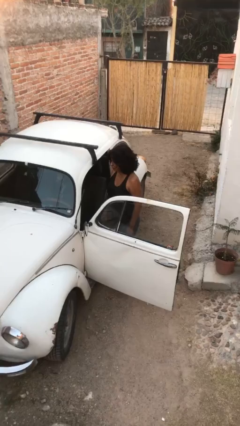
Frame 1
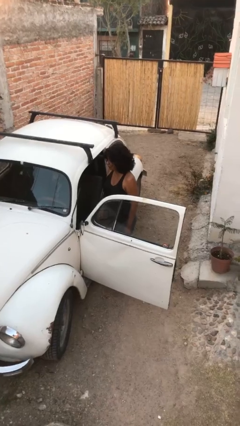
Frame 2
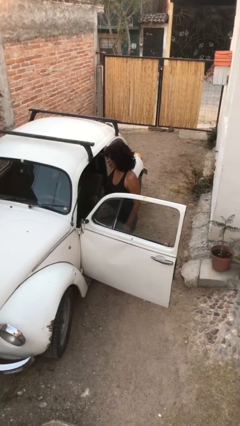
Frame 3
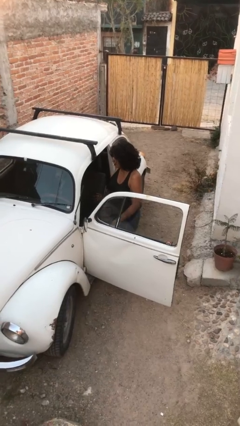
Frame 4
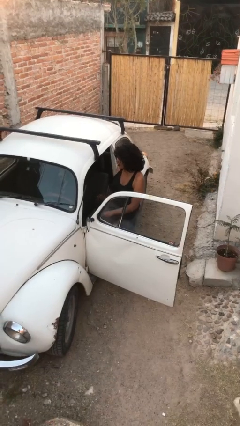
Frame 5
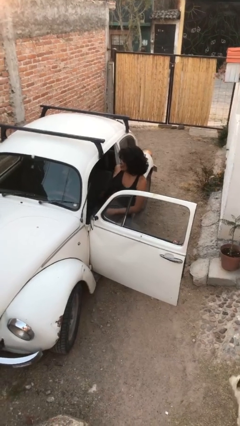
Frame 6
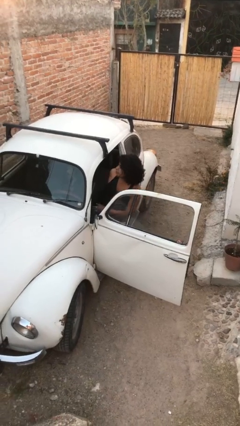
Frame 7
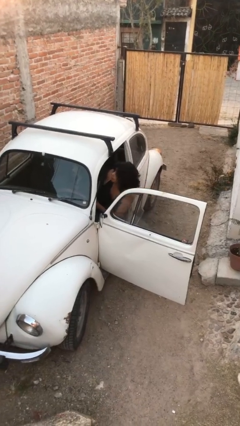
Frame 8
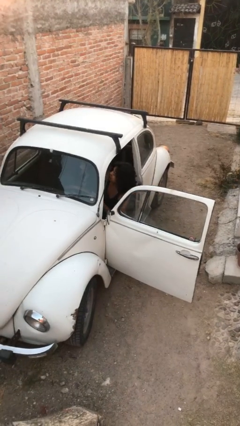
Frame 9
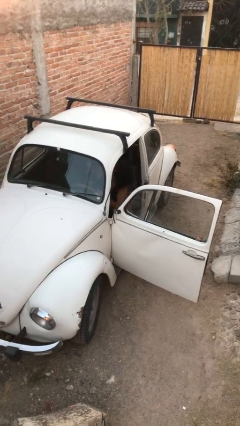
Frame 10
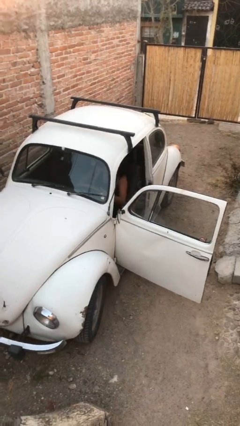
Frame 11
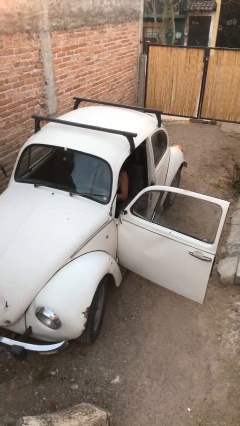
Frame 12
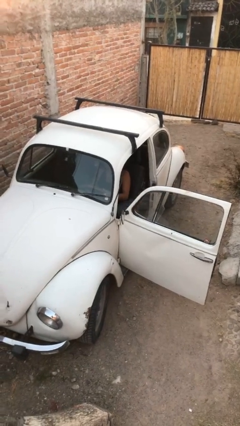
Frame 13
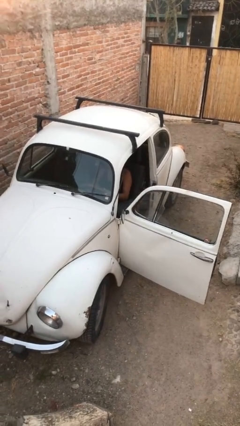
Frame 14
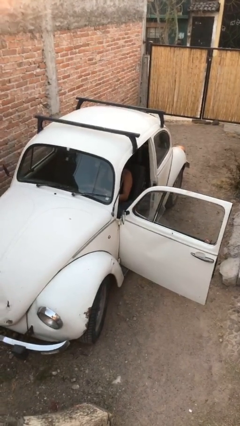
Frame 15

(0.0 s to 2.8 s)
person enters car

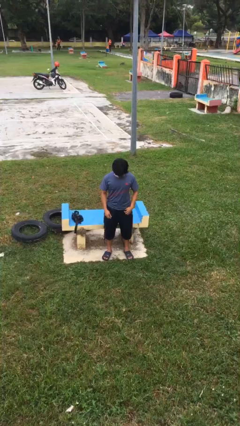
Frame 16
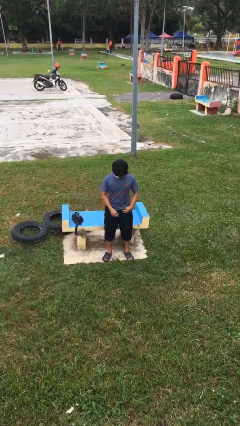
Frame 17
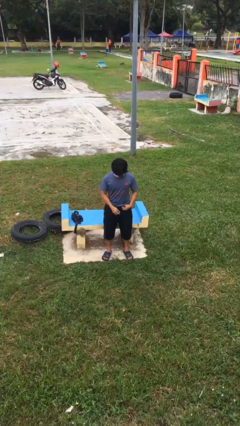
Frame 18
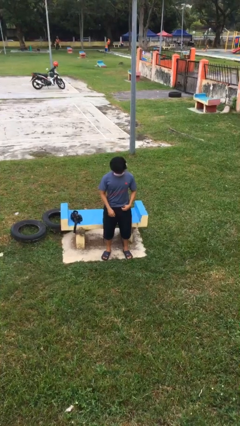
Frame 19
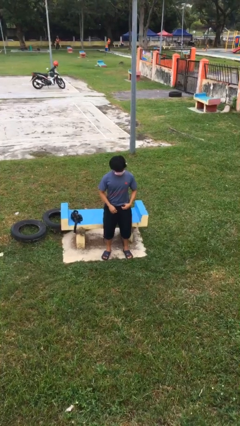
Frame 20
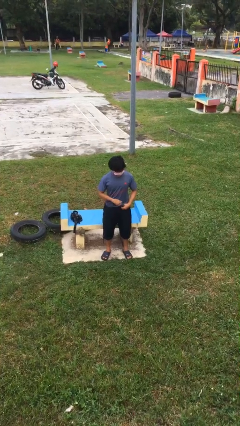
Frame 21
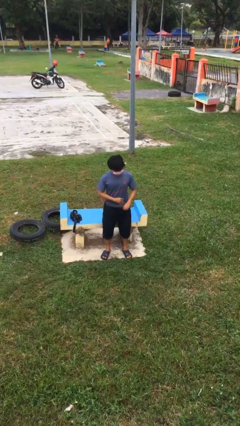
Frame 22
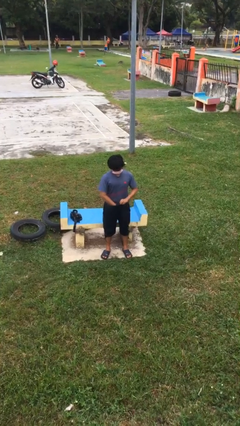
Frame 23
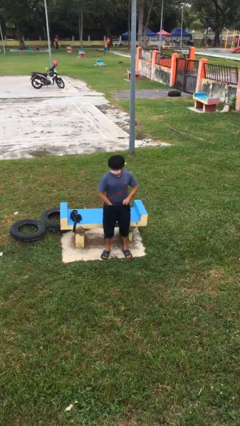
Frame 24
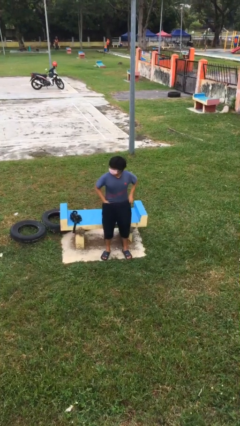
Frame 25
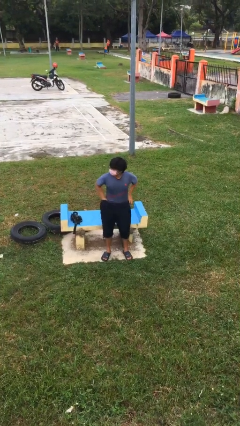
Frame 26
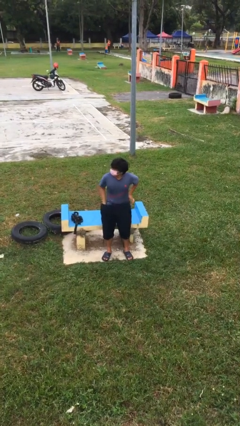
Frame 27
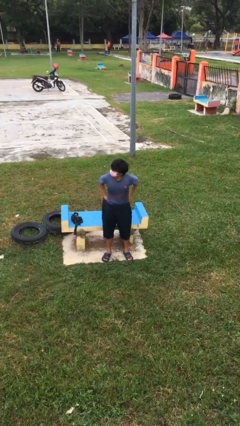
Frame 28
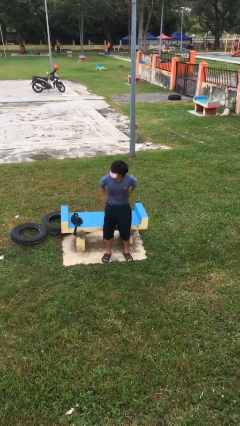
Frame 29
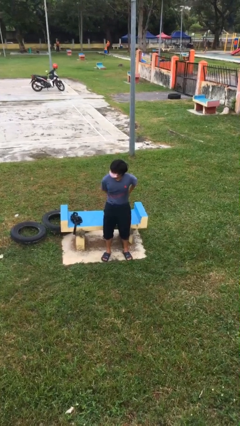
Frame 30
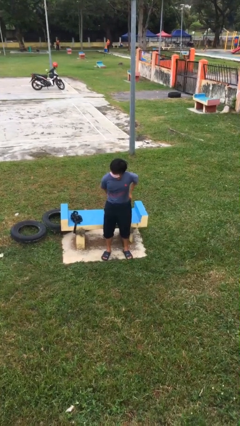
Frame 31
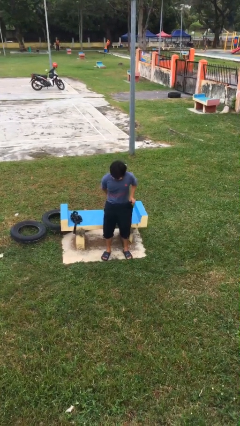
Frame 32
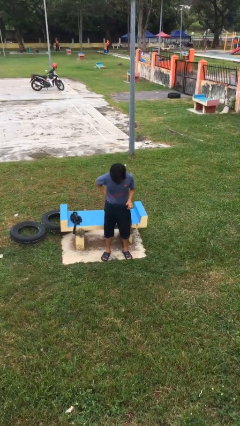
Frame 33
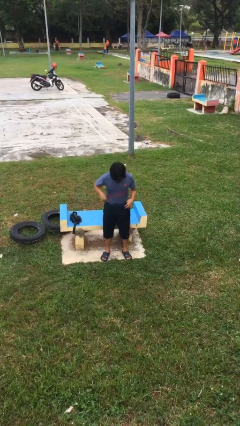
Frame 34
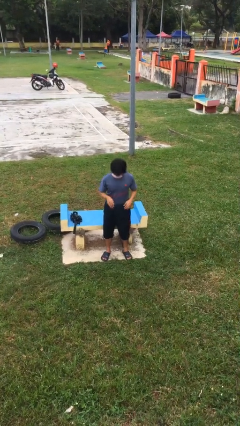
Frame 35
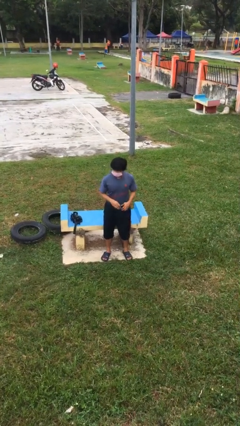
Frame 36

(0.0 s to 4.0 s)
person tucks in shirt

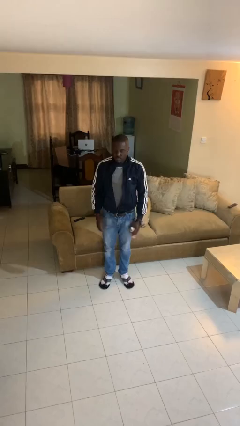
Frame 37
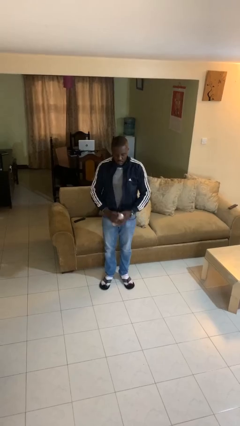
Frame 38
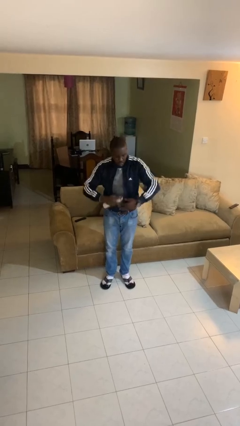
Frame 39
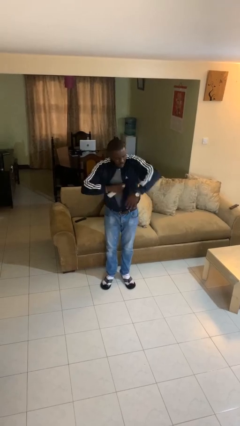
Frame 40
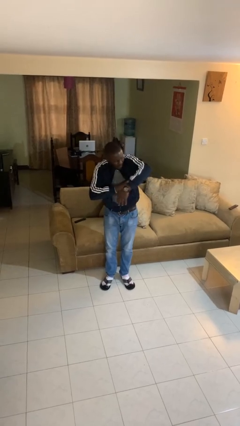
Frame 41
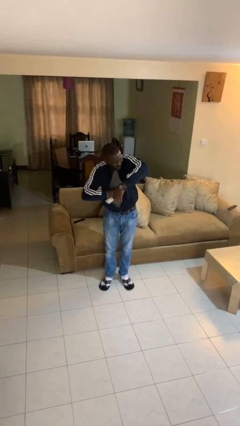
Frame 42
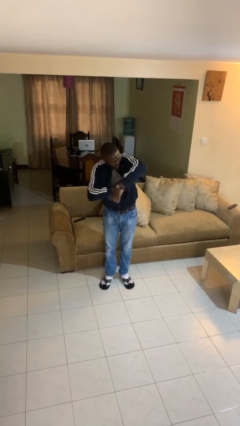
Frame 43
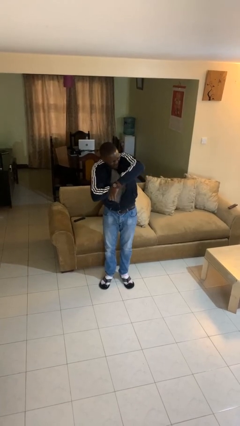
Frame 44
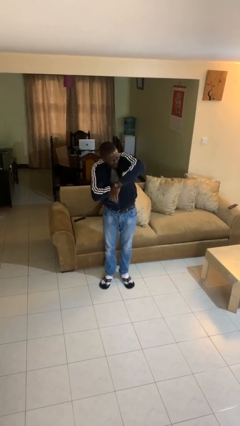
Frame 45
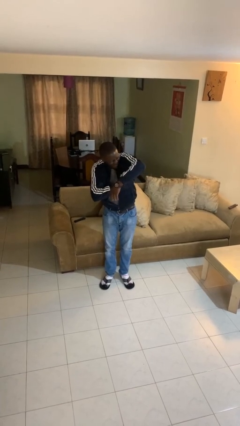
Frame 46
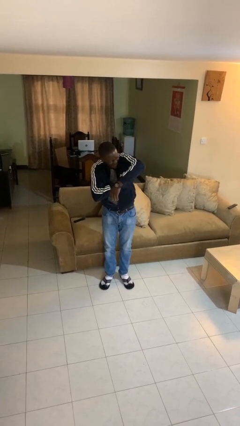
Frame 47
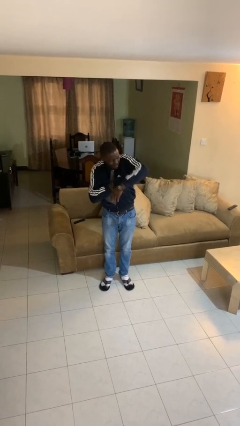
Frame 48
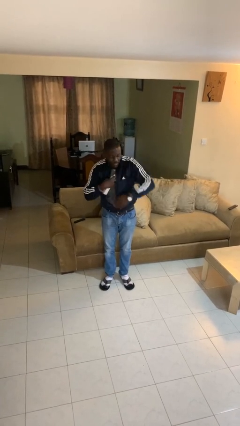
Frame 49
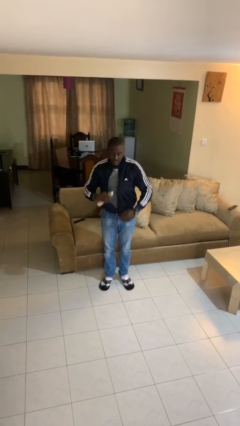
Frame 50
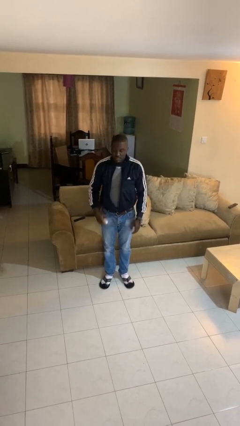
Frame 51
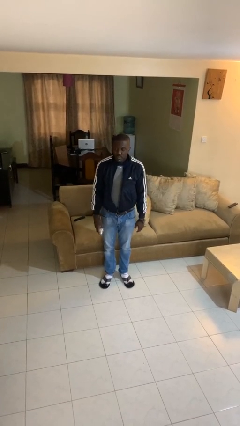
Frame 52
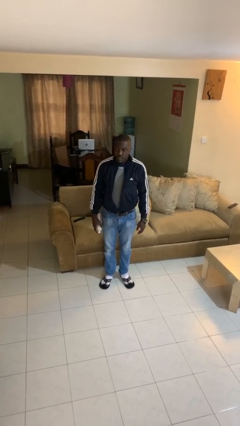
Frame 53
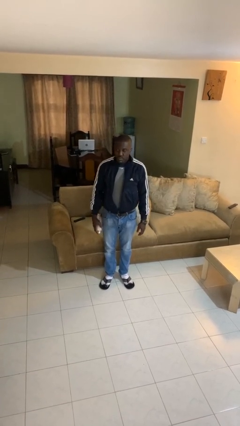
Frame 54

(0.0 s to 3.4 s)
person applies deodorant

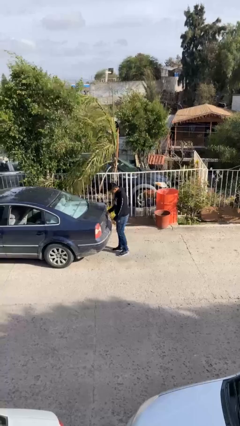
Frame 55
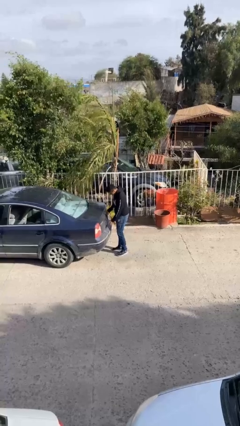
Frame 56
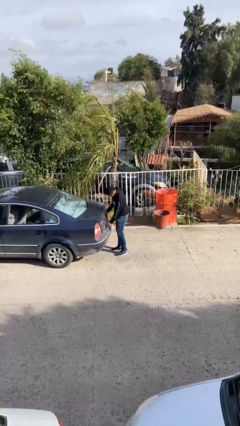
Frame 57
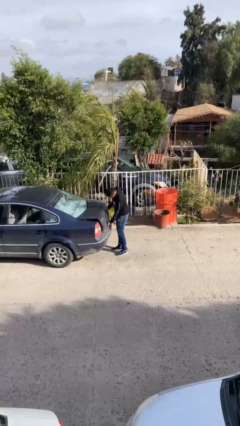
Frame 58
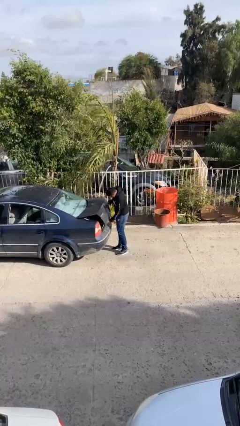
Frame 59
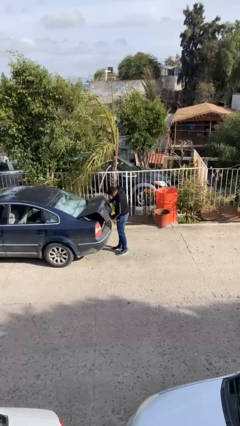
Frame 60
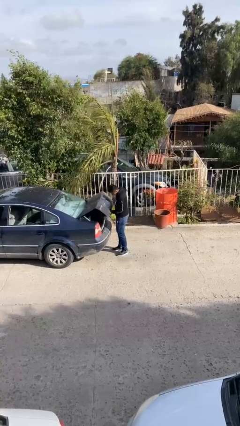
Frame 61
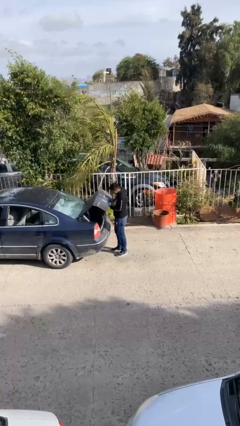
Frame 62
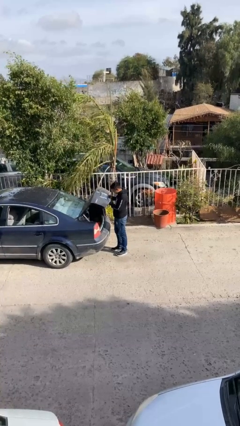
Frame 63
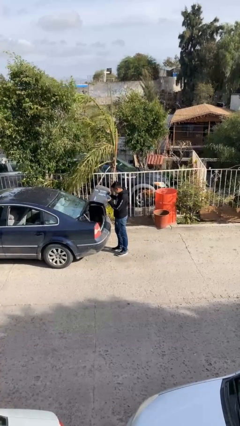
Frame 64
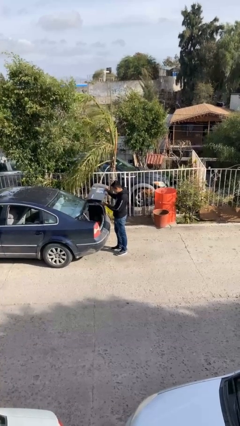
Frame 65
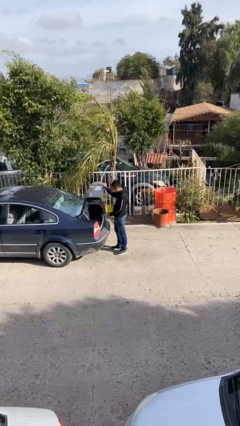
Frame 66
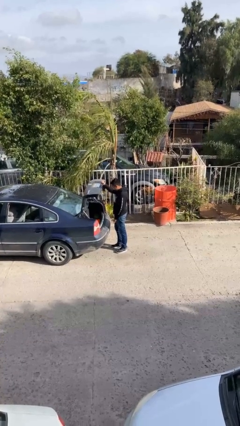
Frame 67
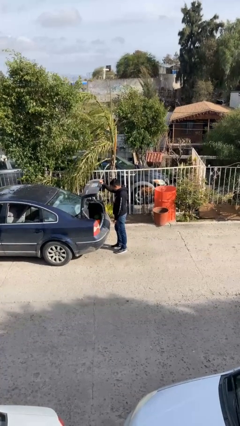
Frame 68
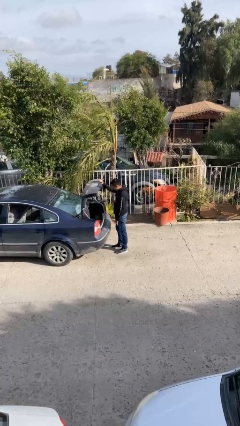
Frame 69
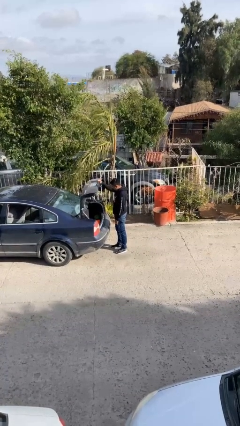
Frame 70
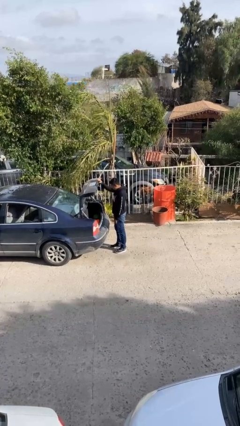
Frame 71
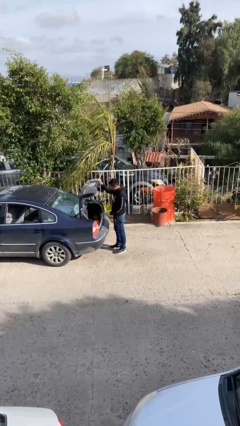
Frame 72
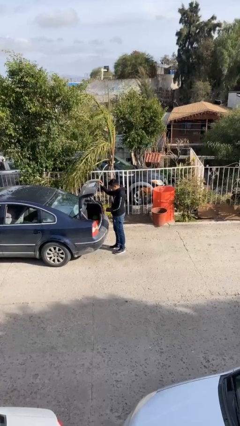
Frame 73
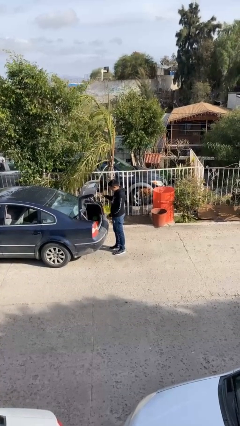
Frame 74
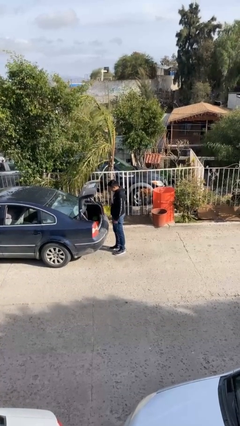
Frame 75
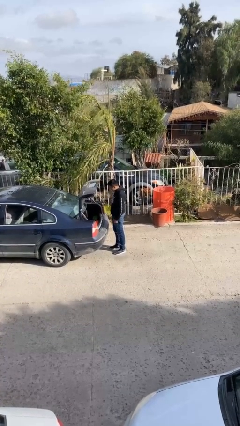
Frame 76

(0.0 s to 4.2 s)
person opens car trunk

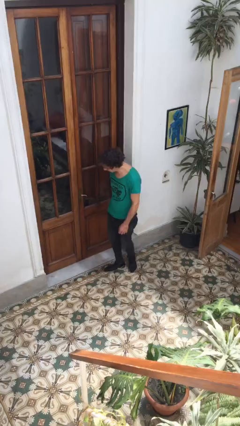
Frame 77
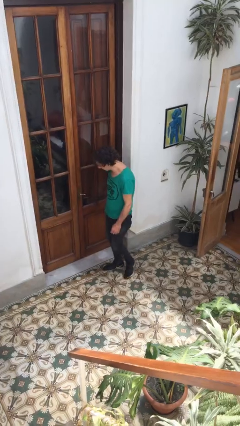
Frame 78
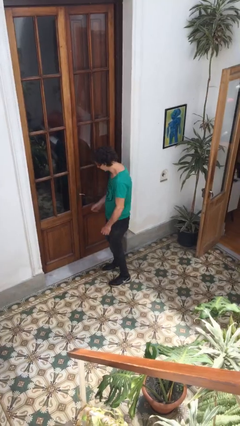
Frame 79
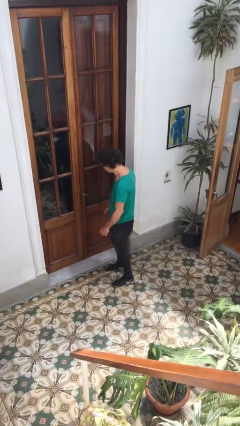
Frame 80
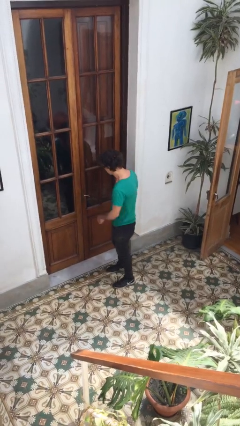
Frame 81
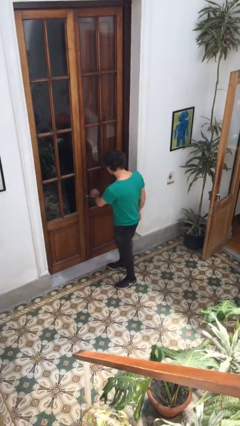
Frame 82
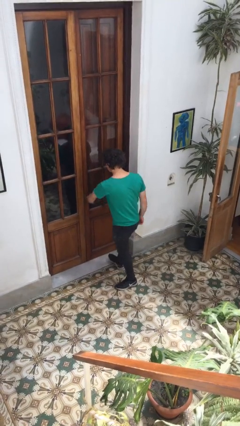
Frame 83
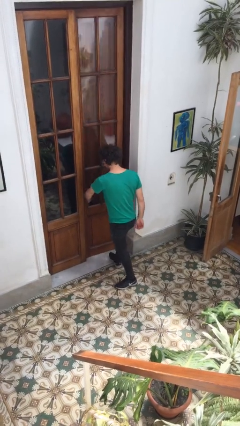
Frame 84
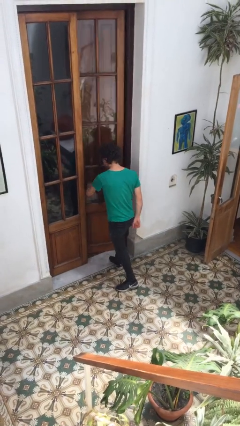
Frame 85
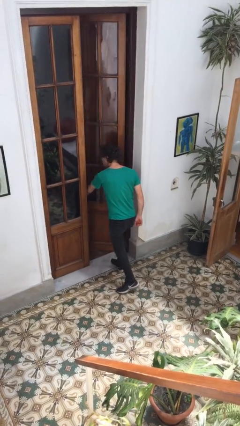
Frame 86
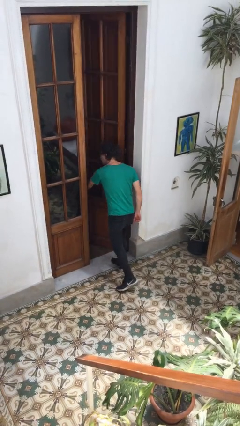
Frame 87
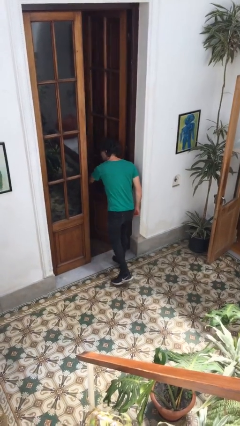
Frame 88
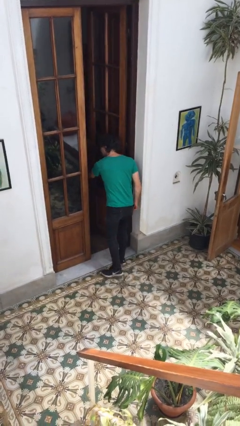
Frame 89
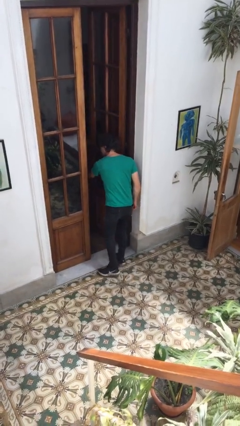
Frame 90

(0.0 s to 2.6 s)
person opens facility door

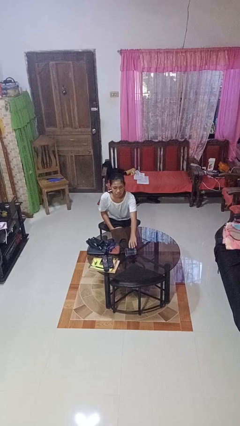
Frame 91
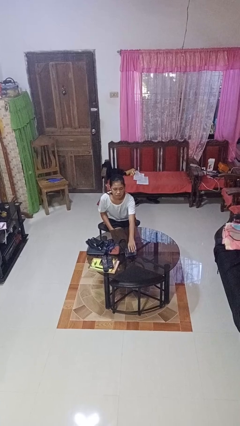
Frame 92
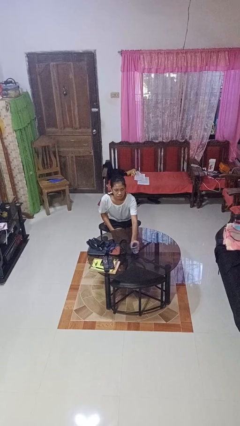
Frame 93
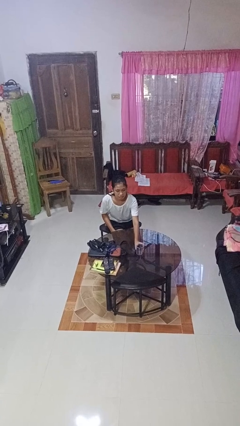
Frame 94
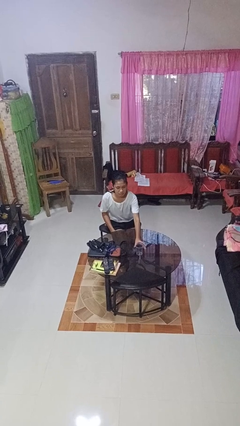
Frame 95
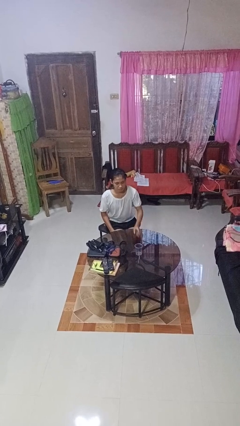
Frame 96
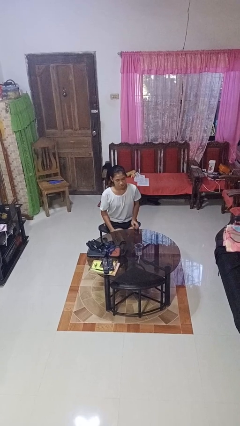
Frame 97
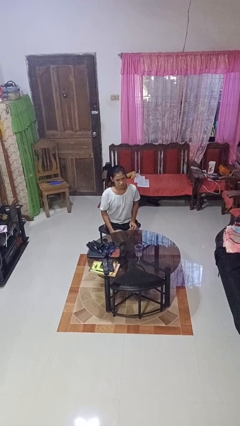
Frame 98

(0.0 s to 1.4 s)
person sets upright glass
